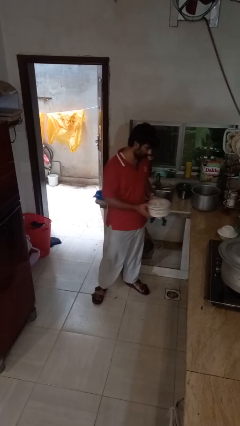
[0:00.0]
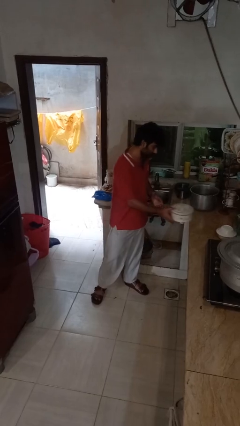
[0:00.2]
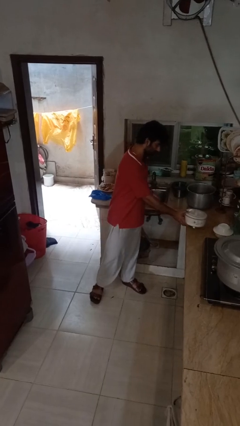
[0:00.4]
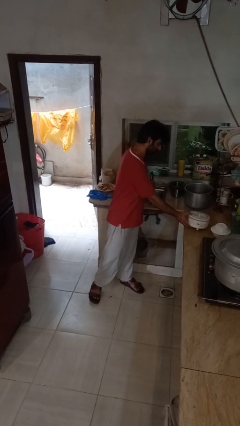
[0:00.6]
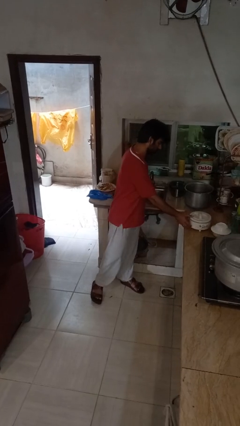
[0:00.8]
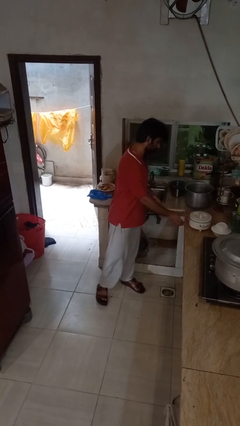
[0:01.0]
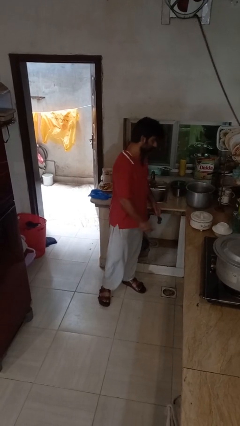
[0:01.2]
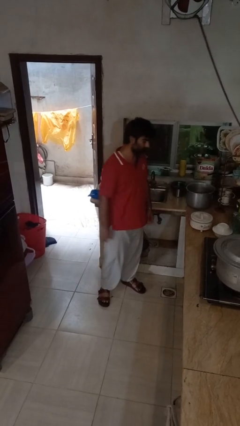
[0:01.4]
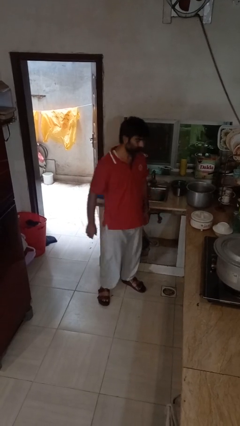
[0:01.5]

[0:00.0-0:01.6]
person puts down object on countertop

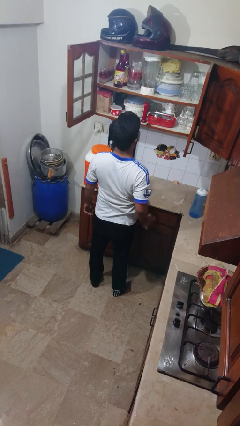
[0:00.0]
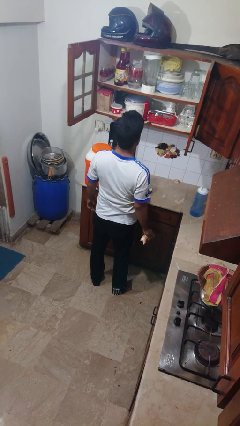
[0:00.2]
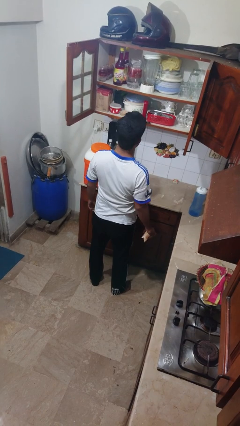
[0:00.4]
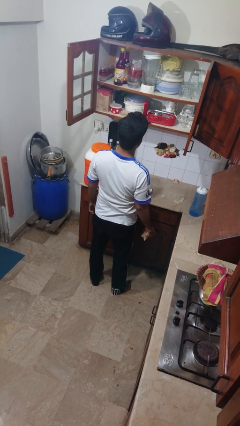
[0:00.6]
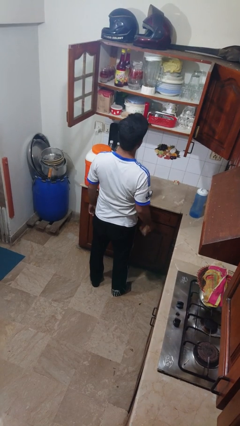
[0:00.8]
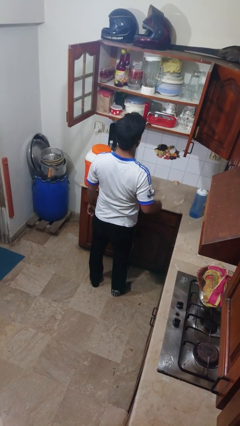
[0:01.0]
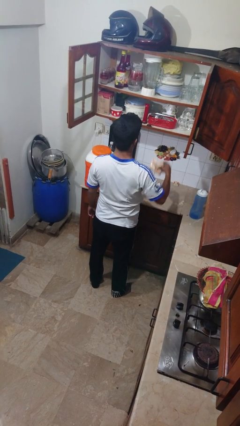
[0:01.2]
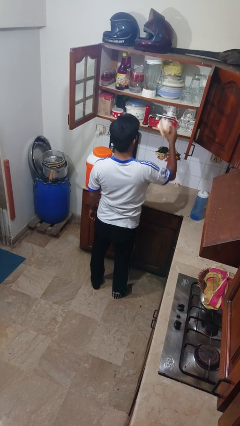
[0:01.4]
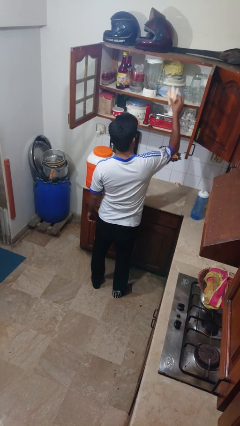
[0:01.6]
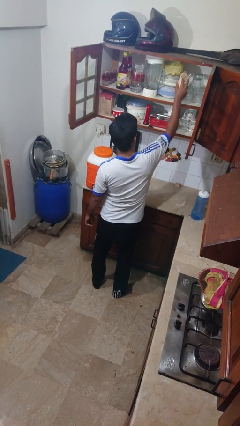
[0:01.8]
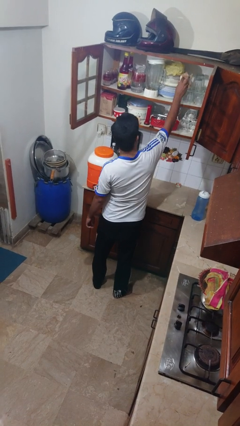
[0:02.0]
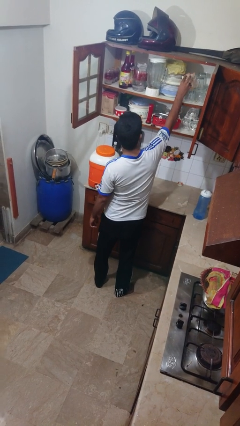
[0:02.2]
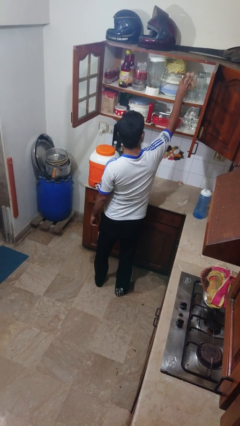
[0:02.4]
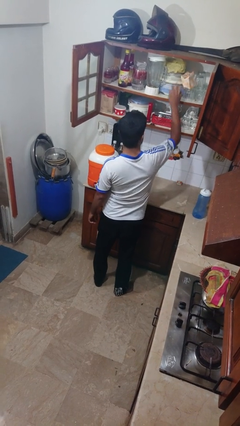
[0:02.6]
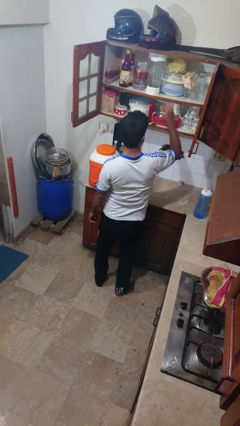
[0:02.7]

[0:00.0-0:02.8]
person puts down object into cabinet

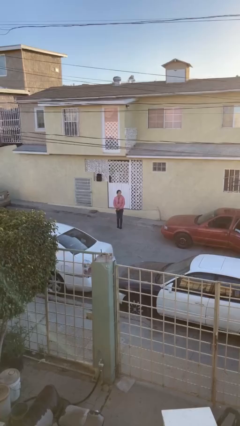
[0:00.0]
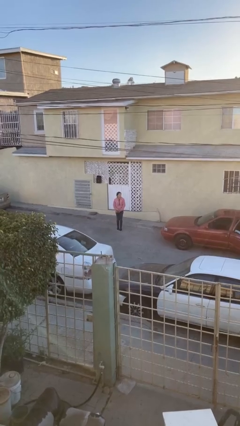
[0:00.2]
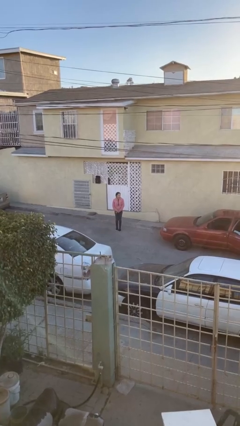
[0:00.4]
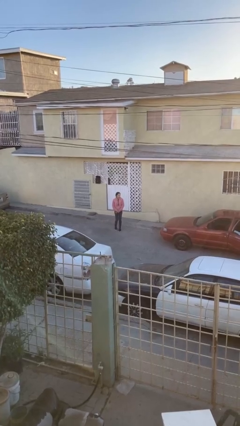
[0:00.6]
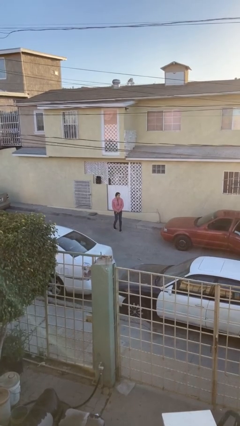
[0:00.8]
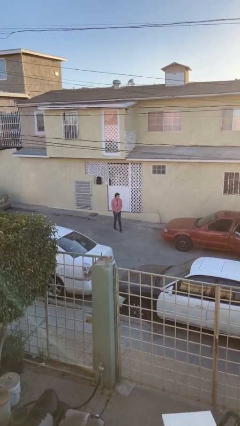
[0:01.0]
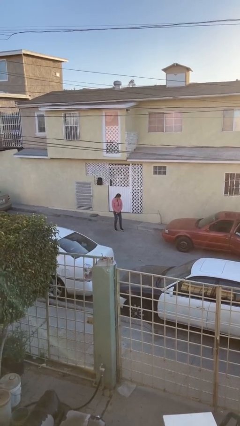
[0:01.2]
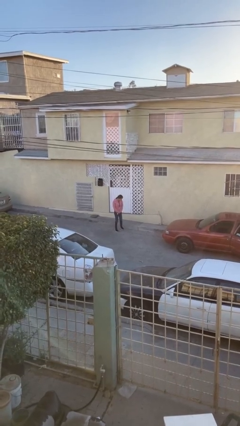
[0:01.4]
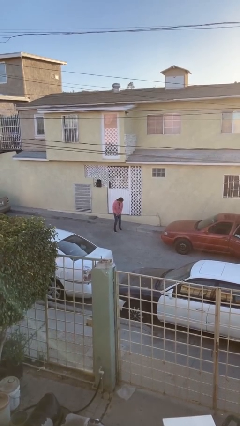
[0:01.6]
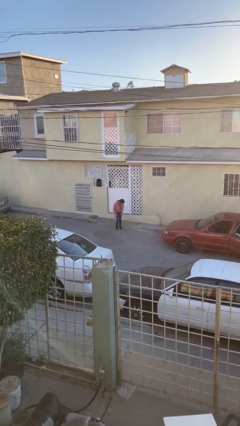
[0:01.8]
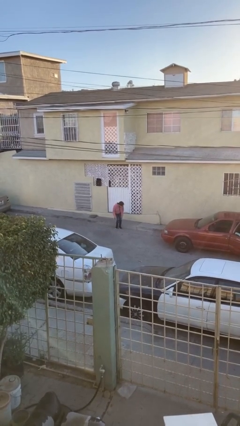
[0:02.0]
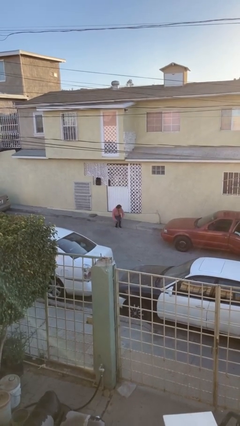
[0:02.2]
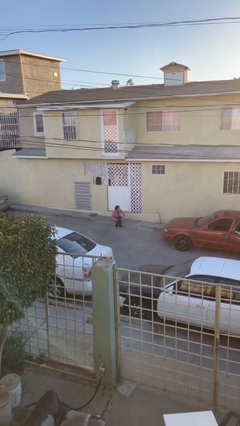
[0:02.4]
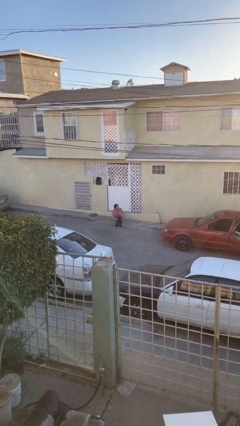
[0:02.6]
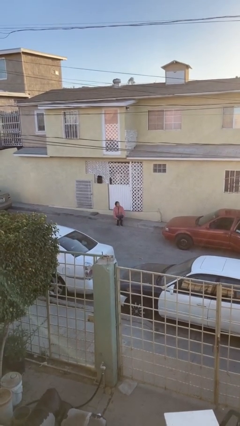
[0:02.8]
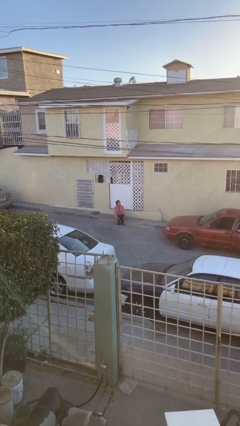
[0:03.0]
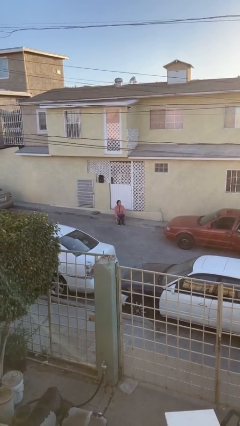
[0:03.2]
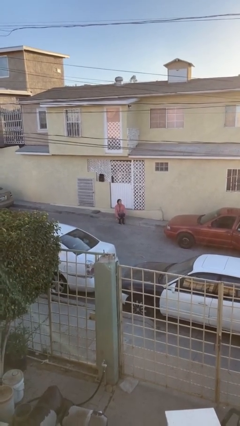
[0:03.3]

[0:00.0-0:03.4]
person sits down

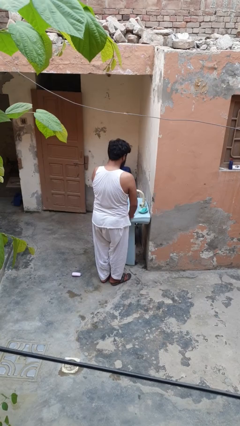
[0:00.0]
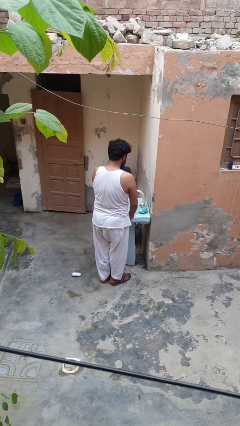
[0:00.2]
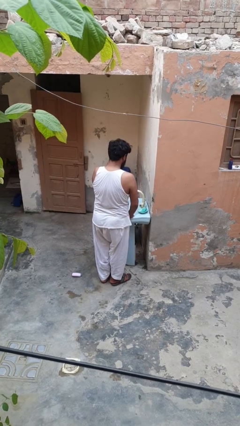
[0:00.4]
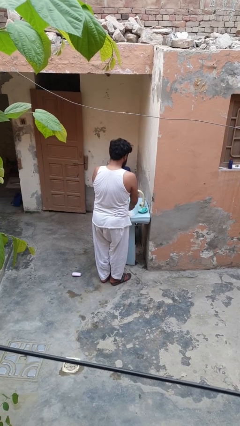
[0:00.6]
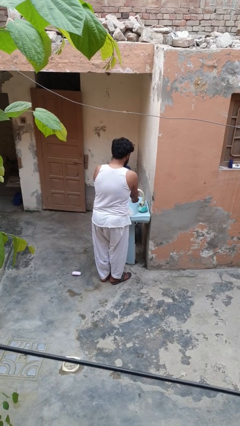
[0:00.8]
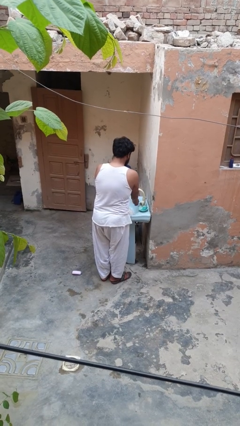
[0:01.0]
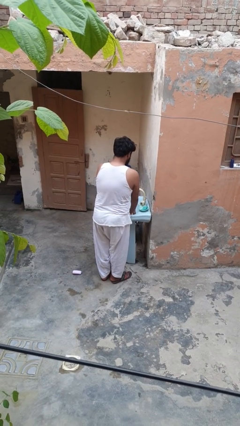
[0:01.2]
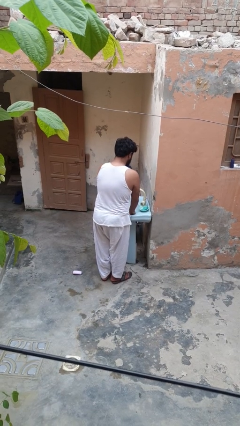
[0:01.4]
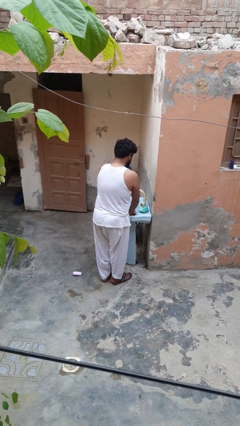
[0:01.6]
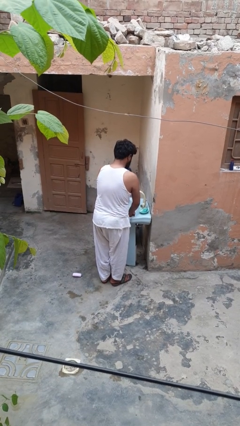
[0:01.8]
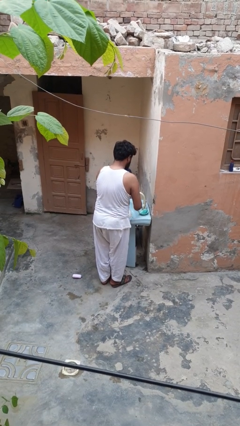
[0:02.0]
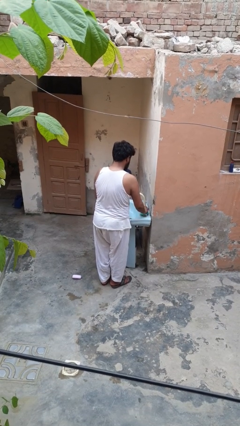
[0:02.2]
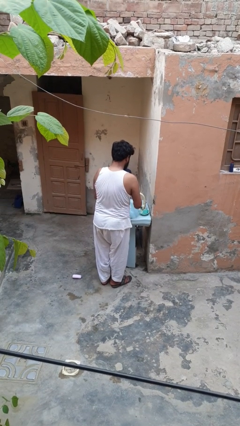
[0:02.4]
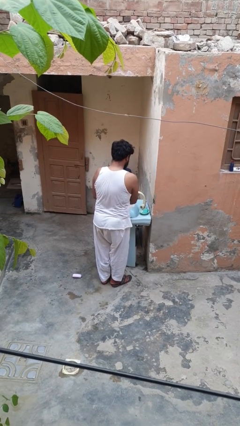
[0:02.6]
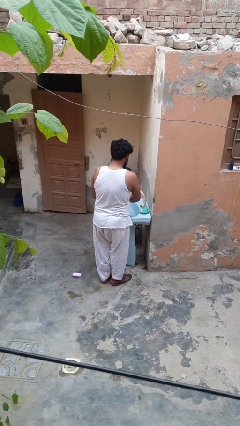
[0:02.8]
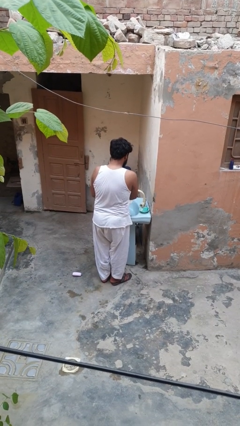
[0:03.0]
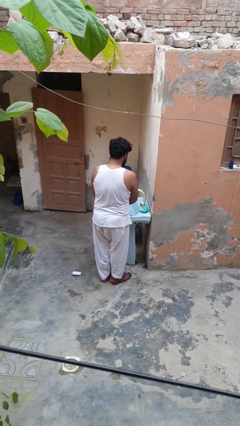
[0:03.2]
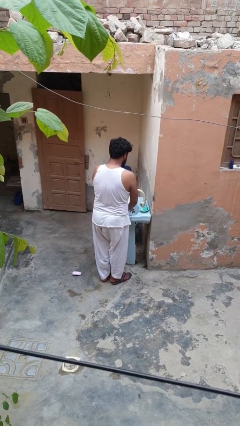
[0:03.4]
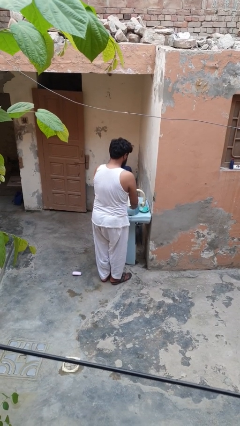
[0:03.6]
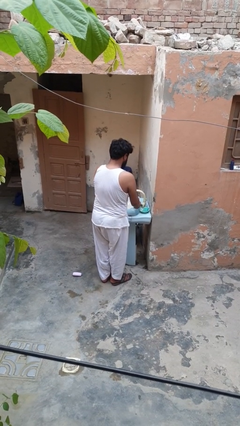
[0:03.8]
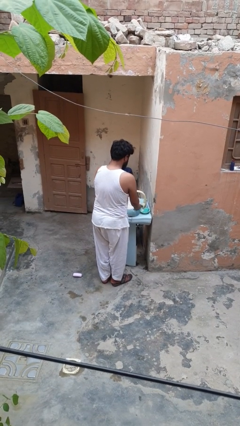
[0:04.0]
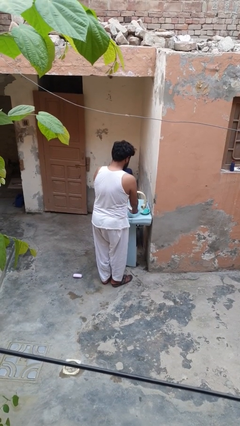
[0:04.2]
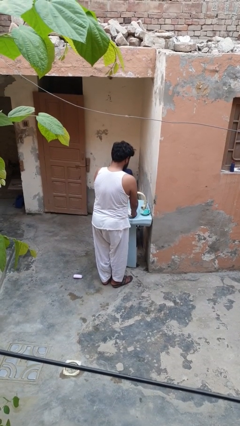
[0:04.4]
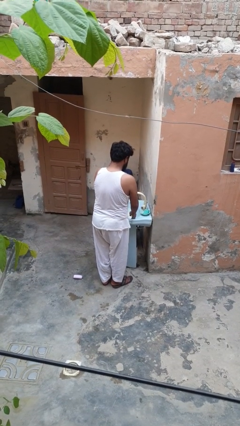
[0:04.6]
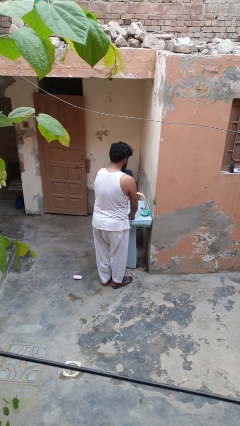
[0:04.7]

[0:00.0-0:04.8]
person washes dish

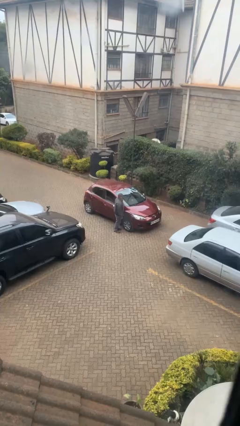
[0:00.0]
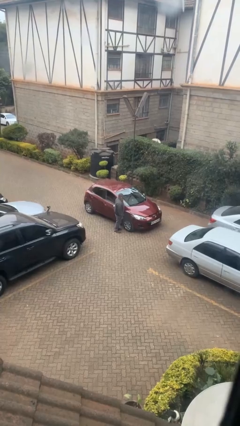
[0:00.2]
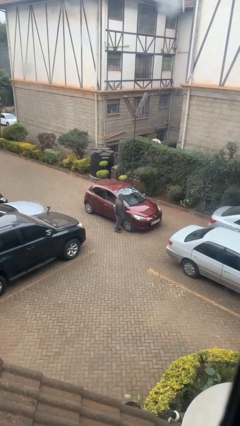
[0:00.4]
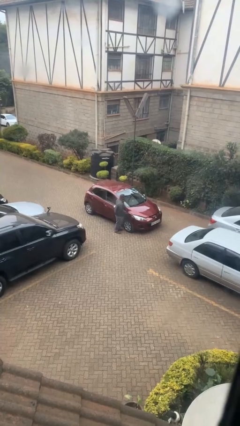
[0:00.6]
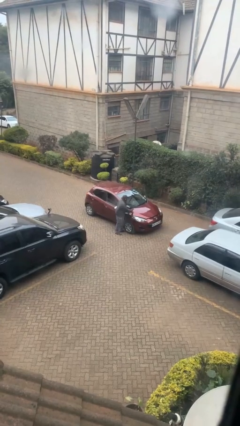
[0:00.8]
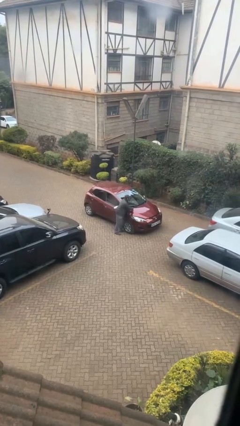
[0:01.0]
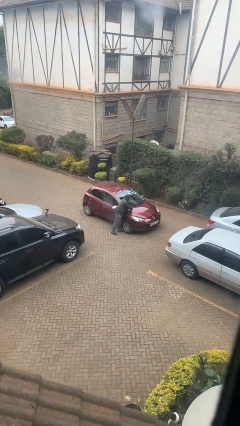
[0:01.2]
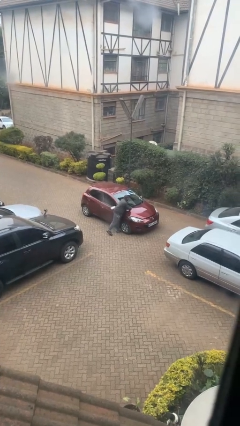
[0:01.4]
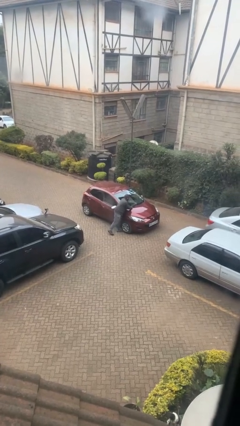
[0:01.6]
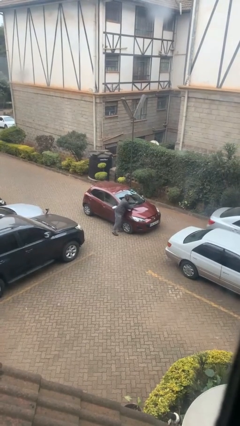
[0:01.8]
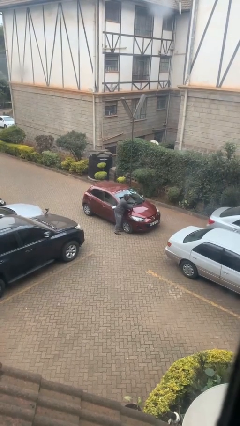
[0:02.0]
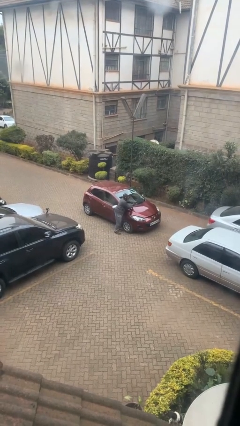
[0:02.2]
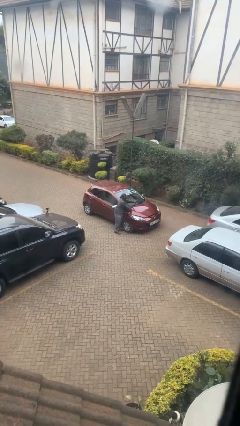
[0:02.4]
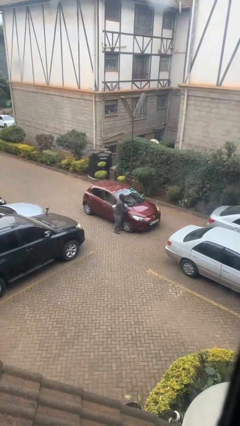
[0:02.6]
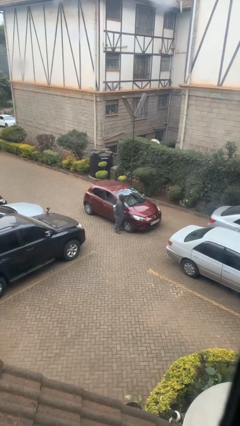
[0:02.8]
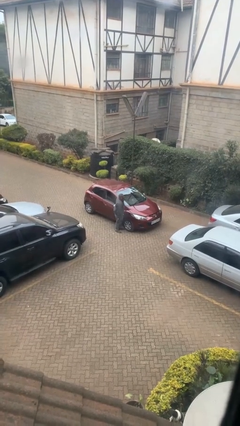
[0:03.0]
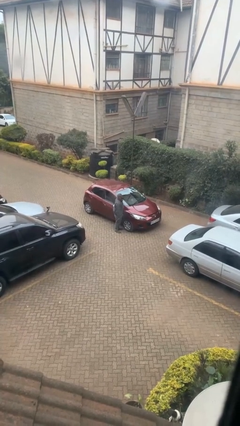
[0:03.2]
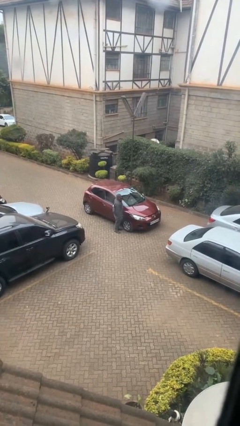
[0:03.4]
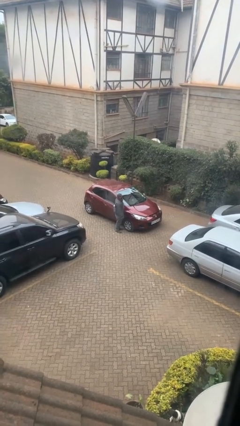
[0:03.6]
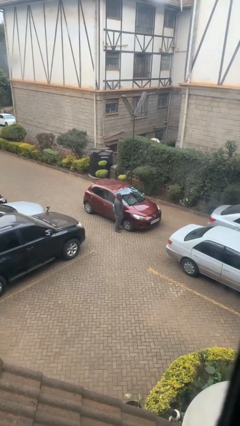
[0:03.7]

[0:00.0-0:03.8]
person flips up car wipers

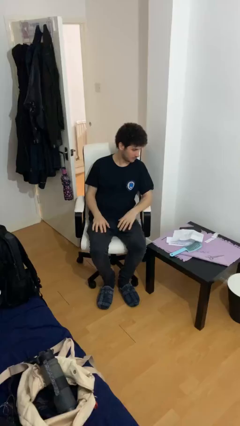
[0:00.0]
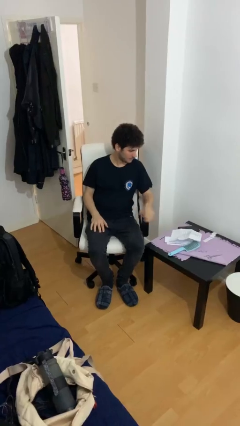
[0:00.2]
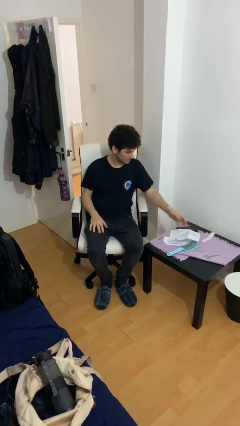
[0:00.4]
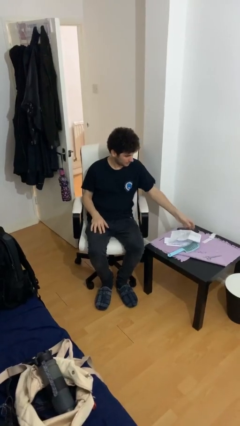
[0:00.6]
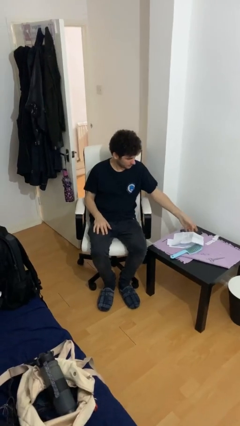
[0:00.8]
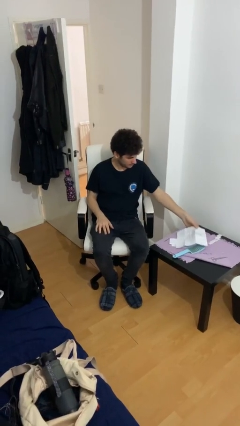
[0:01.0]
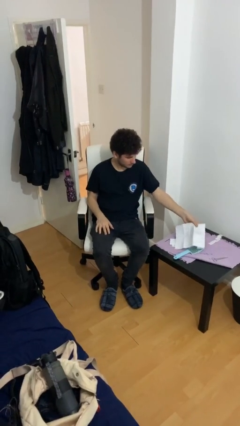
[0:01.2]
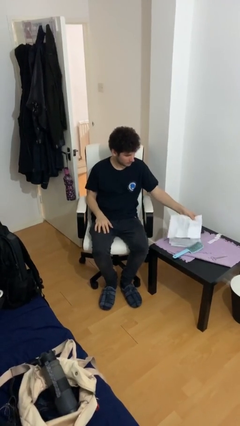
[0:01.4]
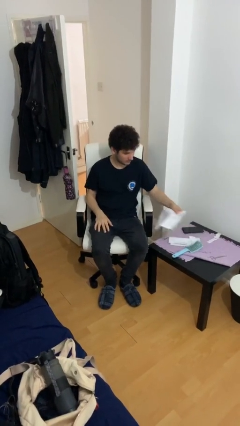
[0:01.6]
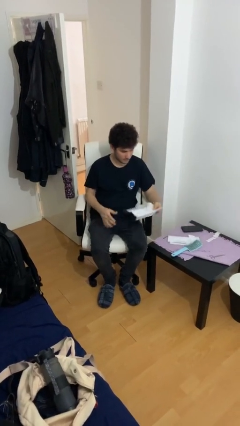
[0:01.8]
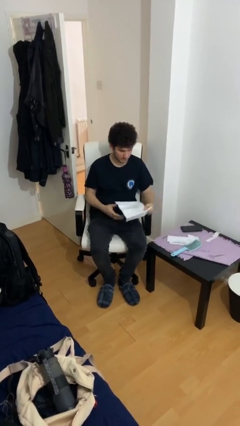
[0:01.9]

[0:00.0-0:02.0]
person picks up object from table
